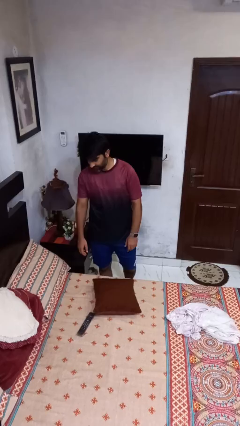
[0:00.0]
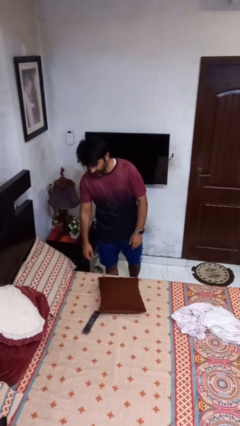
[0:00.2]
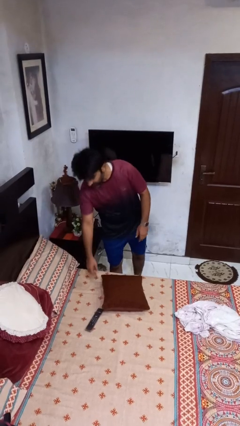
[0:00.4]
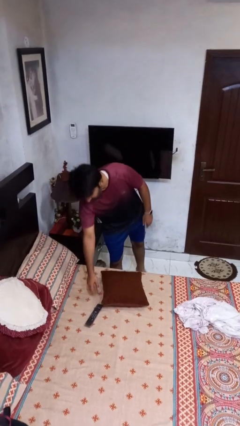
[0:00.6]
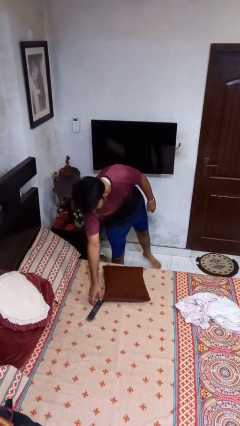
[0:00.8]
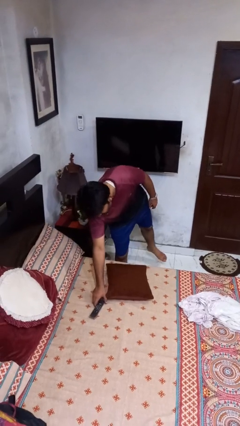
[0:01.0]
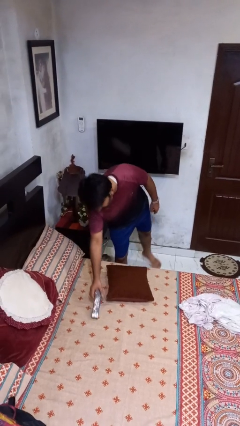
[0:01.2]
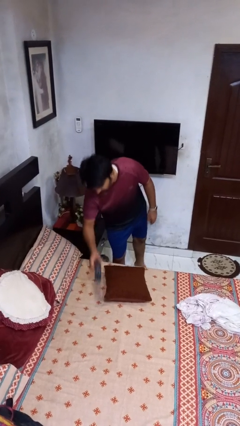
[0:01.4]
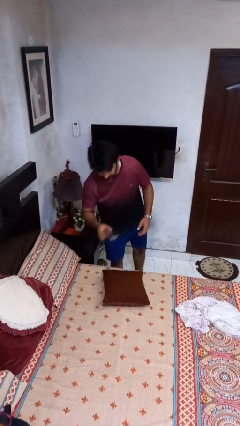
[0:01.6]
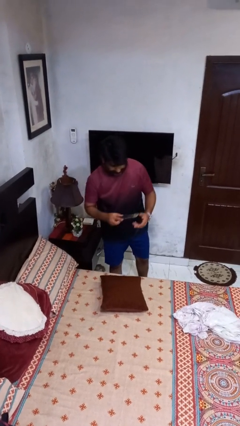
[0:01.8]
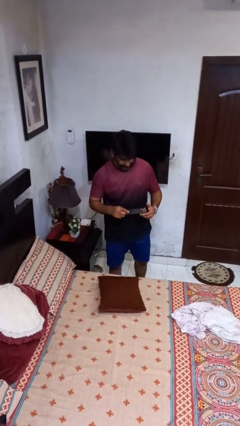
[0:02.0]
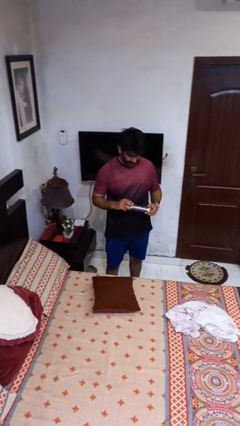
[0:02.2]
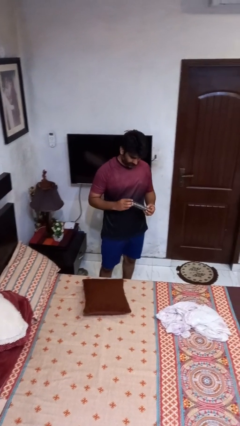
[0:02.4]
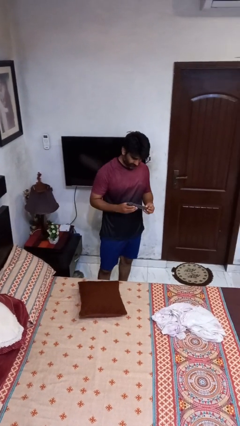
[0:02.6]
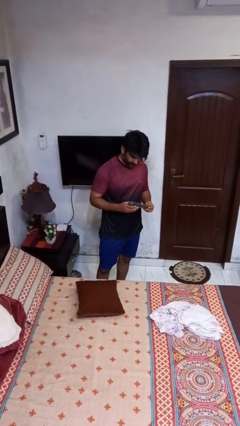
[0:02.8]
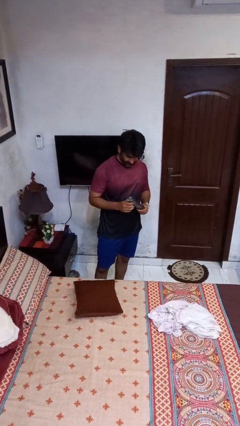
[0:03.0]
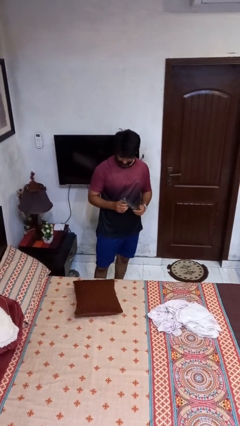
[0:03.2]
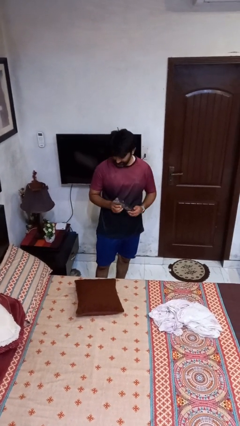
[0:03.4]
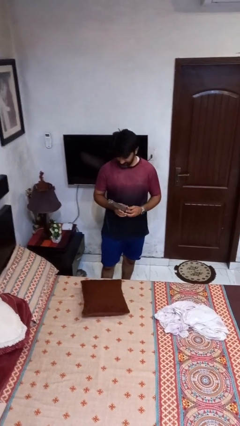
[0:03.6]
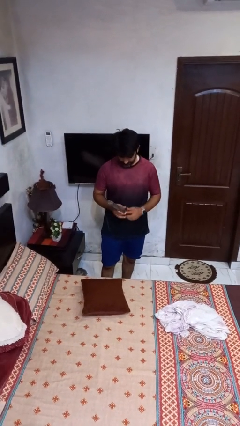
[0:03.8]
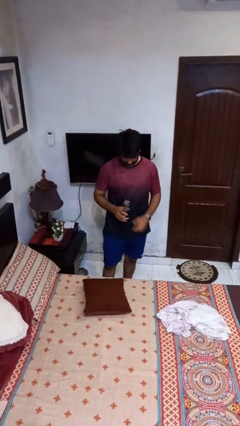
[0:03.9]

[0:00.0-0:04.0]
person picks up object from bed

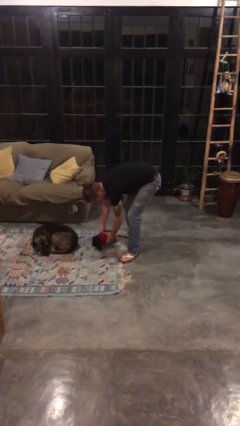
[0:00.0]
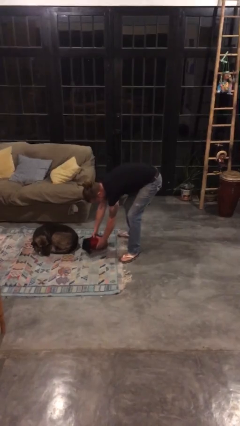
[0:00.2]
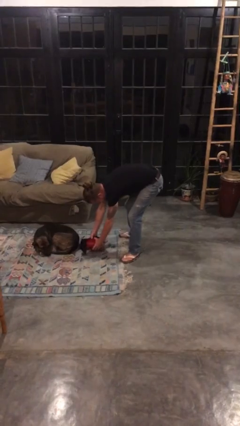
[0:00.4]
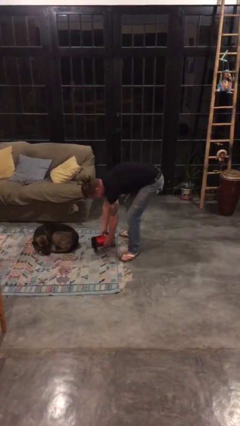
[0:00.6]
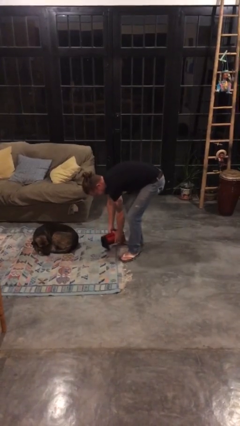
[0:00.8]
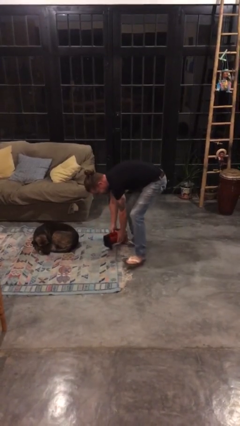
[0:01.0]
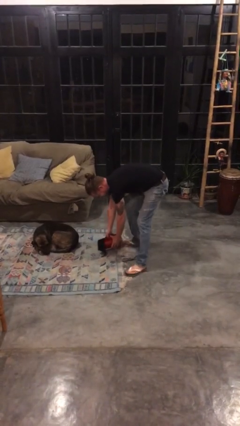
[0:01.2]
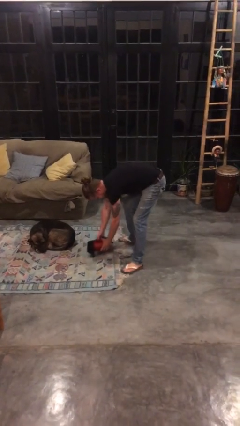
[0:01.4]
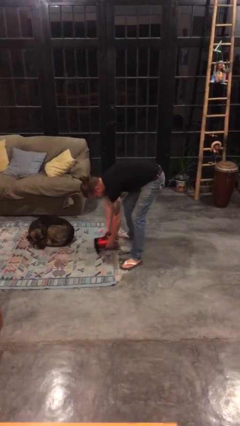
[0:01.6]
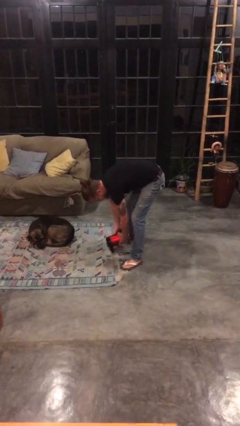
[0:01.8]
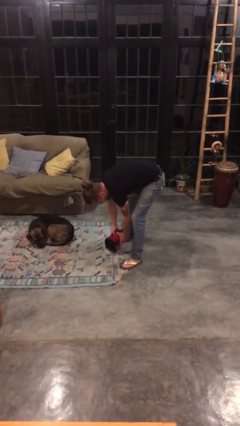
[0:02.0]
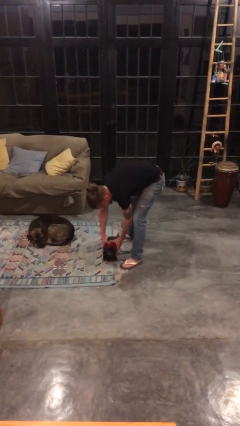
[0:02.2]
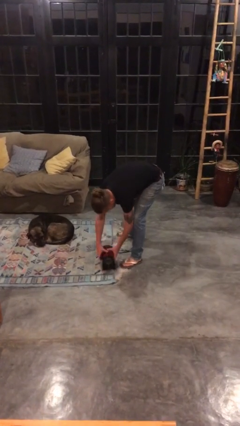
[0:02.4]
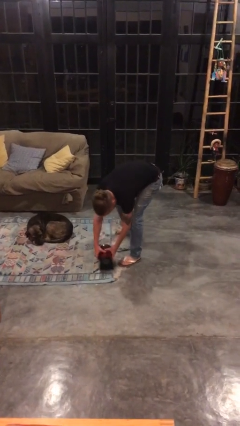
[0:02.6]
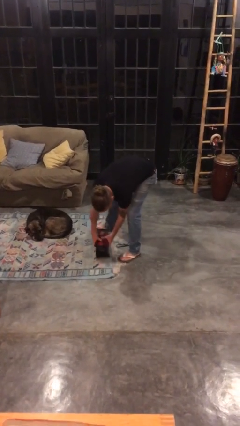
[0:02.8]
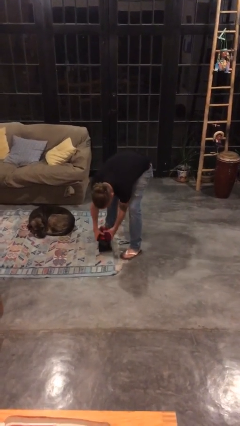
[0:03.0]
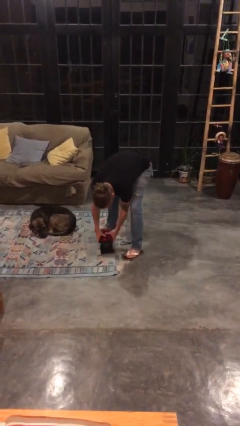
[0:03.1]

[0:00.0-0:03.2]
person vacuums carpet

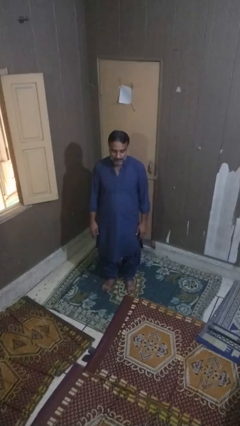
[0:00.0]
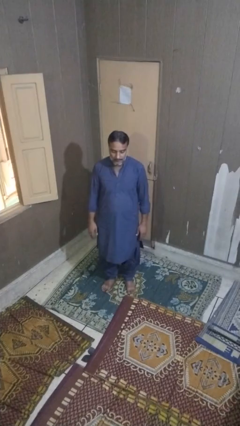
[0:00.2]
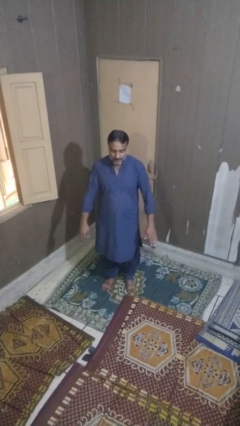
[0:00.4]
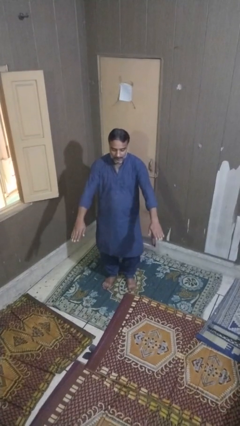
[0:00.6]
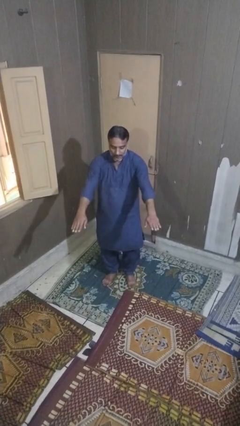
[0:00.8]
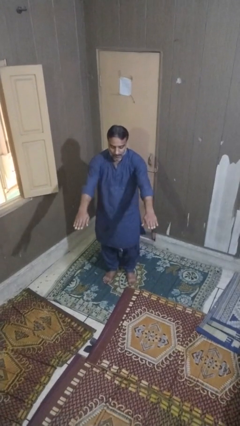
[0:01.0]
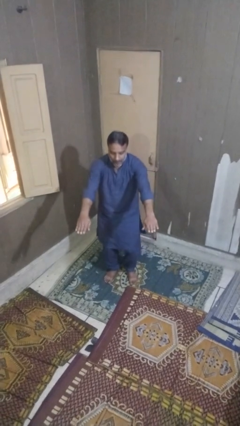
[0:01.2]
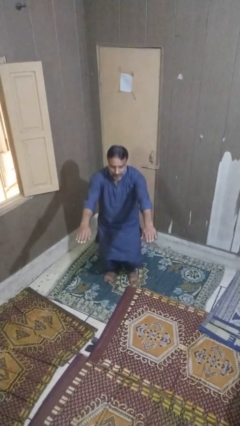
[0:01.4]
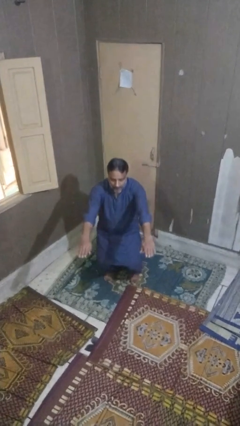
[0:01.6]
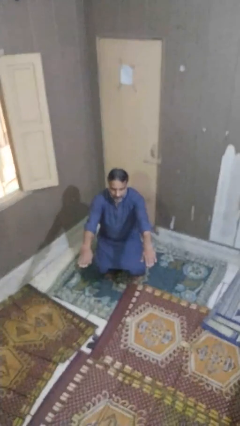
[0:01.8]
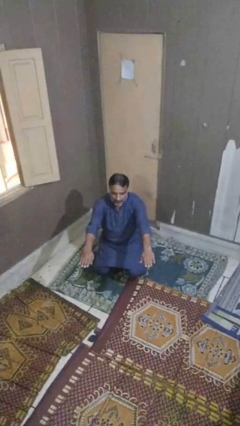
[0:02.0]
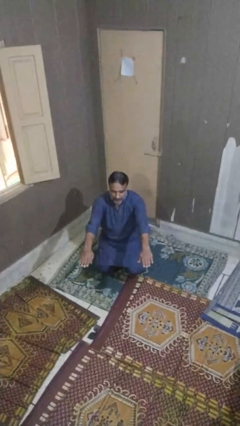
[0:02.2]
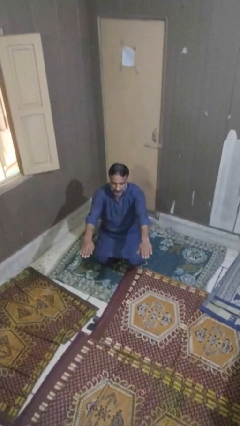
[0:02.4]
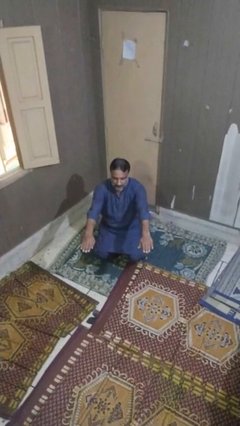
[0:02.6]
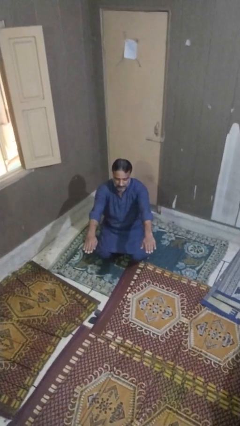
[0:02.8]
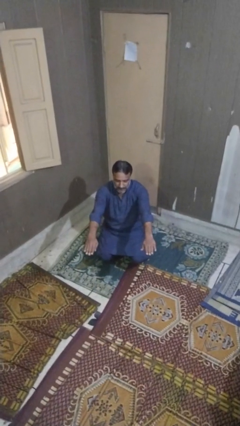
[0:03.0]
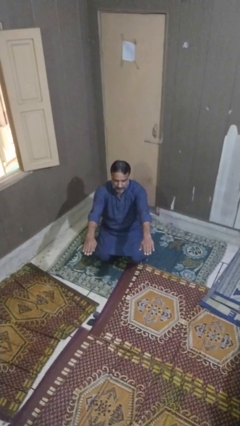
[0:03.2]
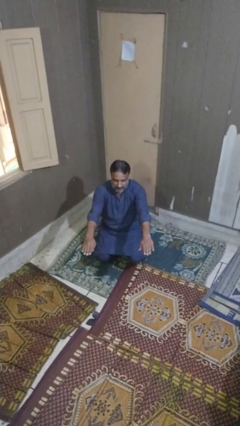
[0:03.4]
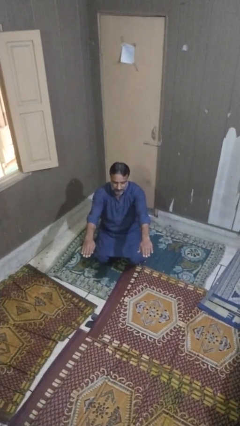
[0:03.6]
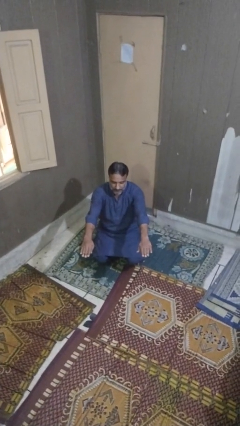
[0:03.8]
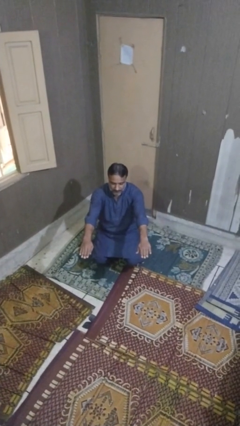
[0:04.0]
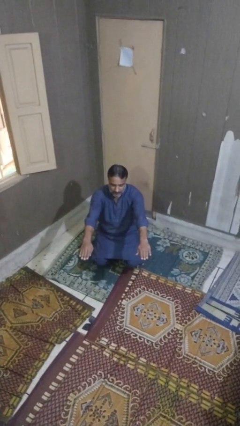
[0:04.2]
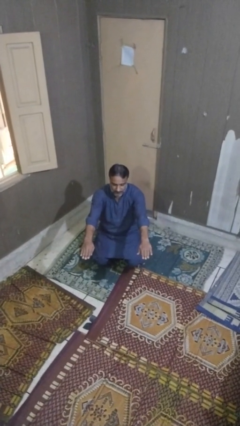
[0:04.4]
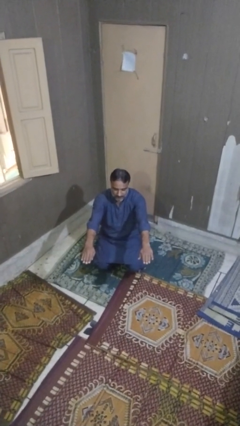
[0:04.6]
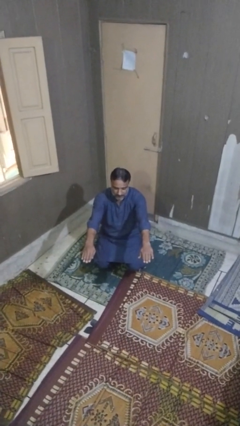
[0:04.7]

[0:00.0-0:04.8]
person squats

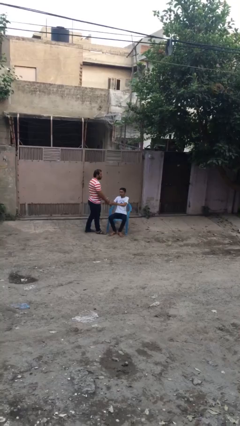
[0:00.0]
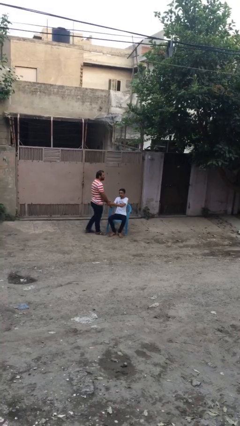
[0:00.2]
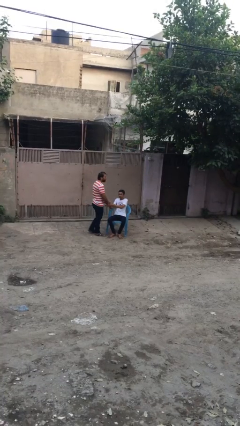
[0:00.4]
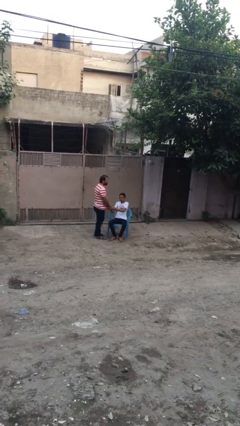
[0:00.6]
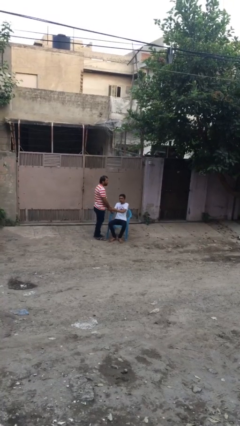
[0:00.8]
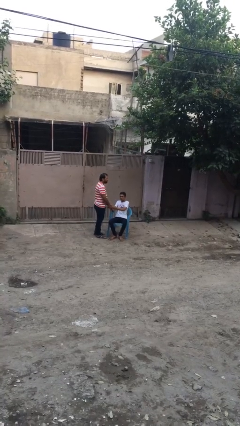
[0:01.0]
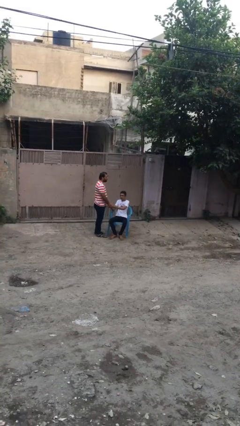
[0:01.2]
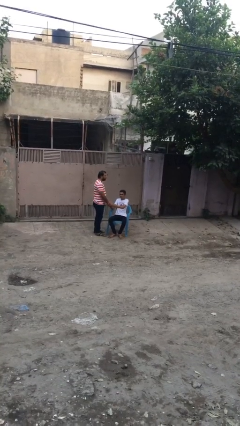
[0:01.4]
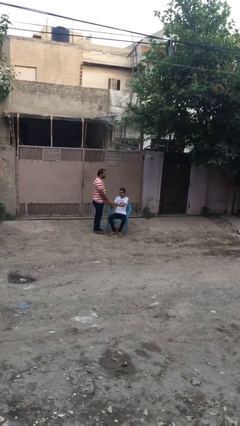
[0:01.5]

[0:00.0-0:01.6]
person shakes hand

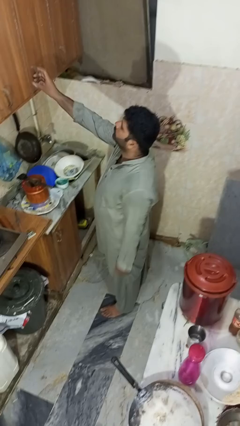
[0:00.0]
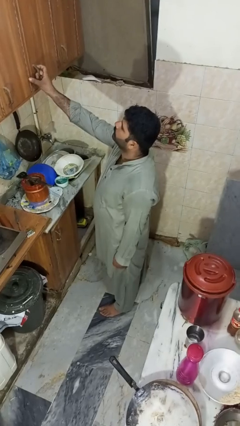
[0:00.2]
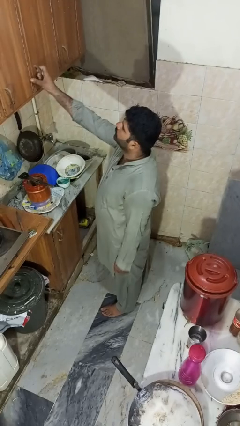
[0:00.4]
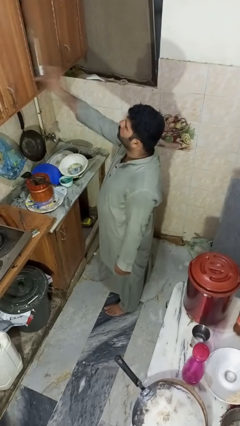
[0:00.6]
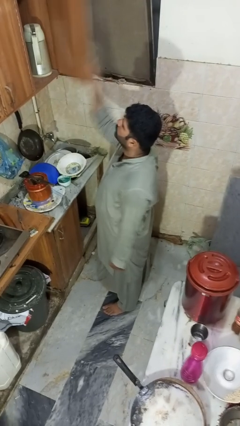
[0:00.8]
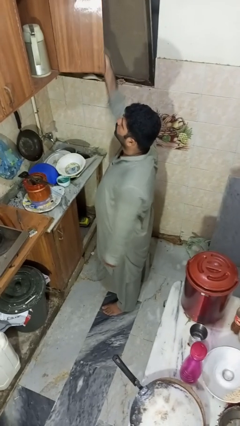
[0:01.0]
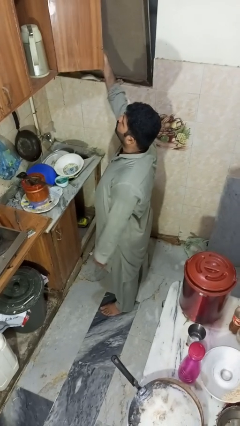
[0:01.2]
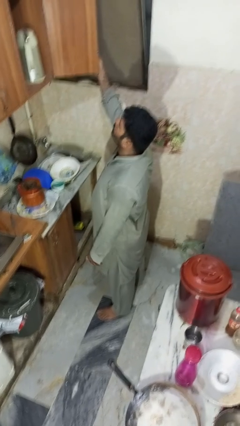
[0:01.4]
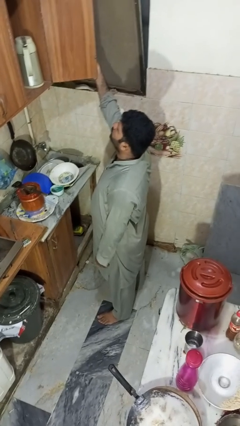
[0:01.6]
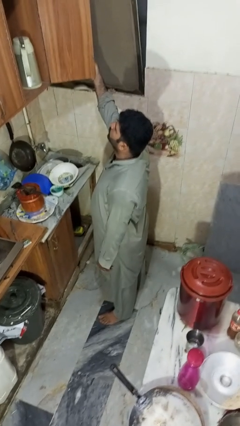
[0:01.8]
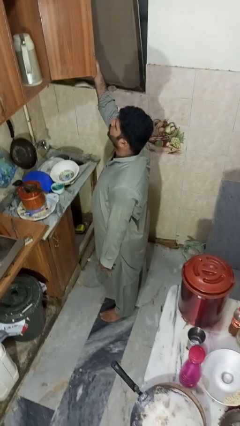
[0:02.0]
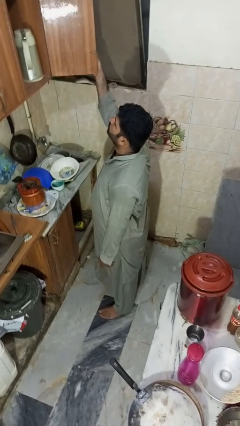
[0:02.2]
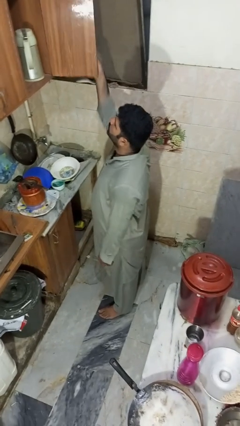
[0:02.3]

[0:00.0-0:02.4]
person opens cabinet

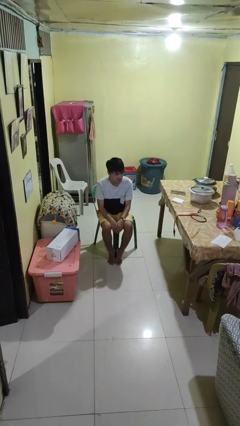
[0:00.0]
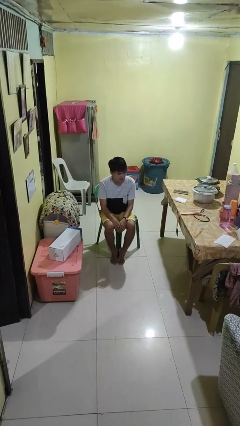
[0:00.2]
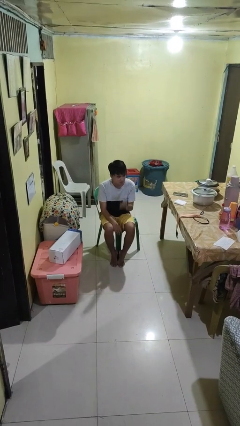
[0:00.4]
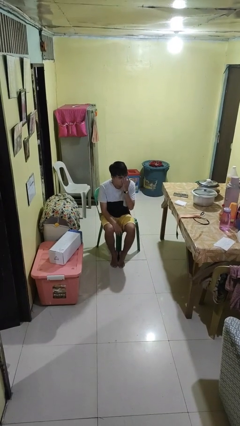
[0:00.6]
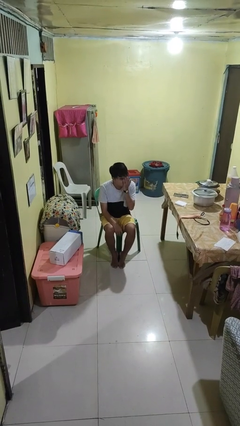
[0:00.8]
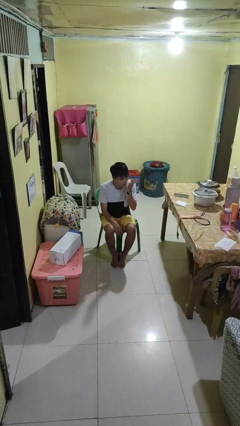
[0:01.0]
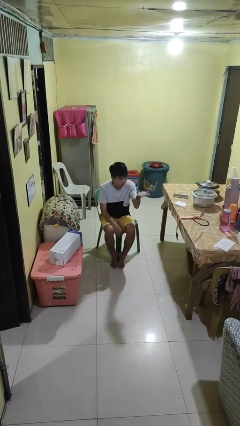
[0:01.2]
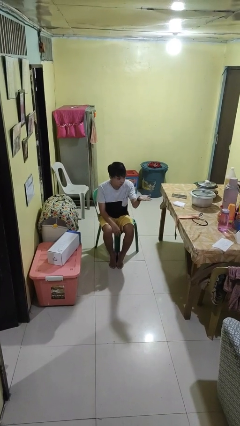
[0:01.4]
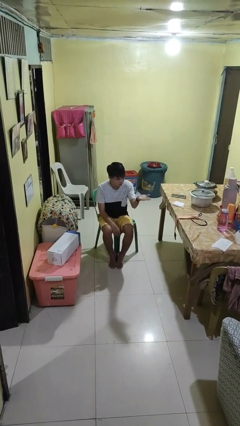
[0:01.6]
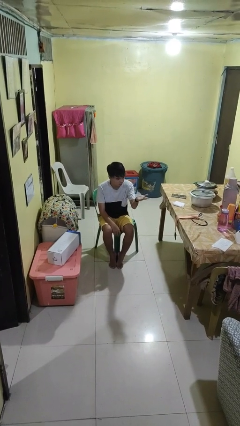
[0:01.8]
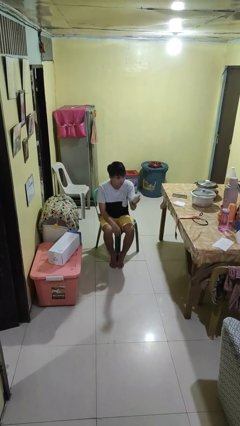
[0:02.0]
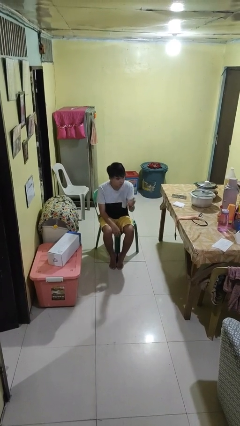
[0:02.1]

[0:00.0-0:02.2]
person gestures blow kiss
